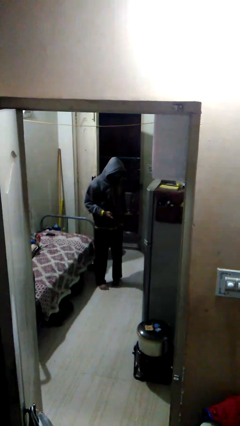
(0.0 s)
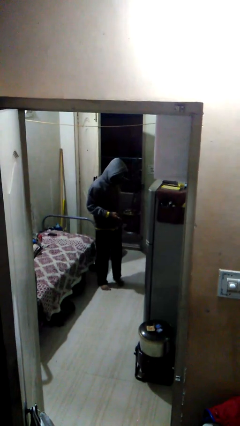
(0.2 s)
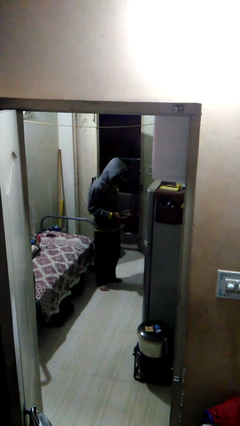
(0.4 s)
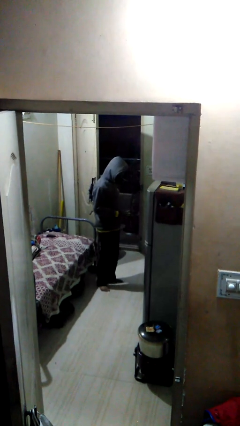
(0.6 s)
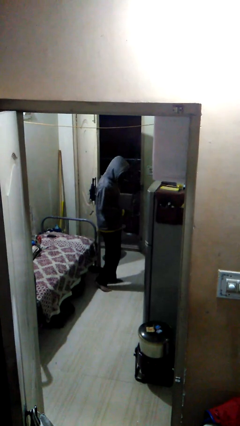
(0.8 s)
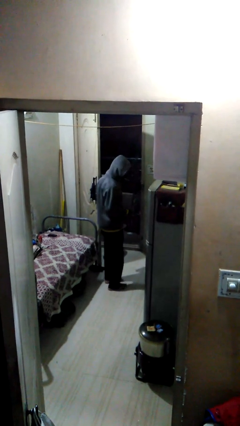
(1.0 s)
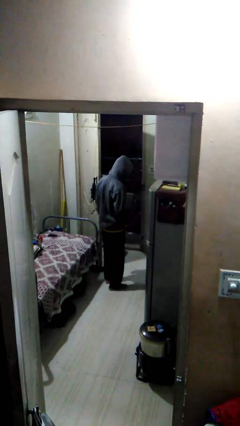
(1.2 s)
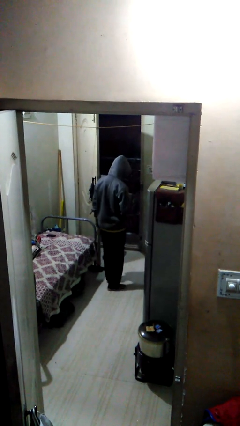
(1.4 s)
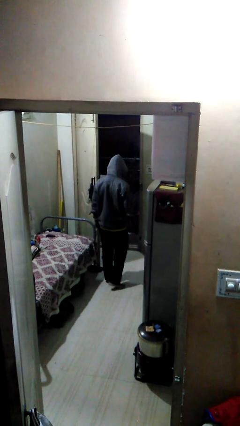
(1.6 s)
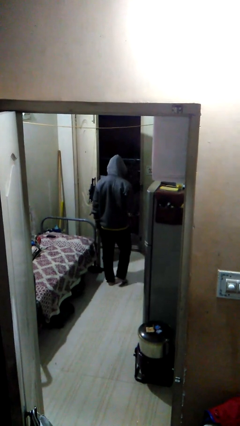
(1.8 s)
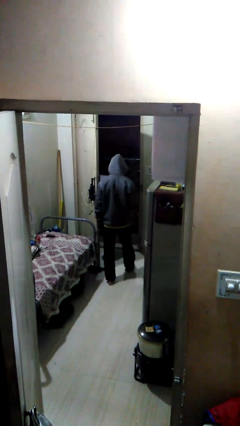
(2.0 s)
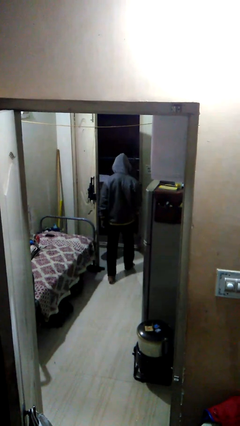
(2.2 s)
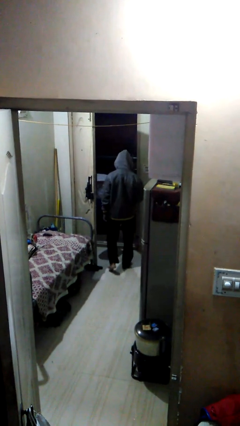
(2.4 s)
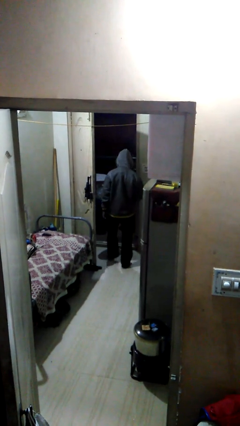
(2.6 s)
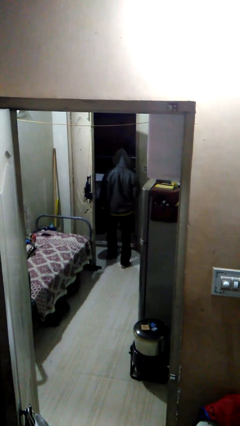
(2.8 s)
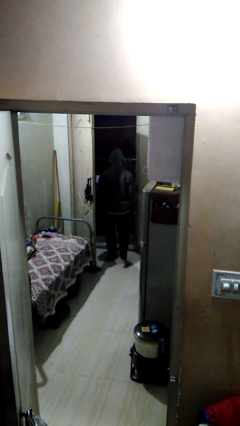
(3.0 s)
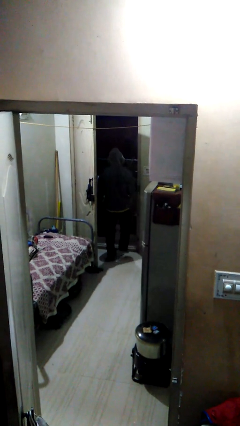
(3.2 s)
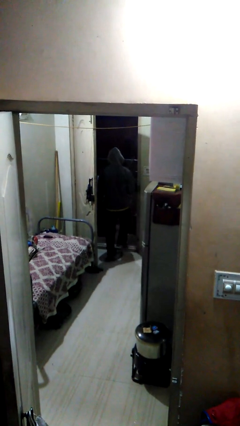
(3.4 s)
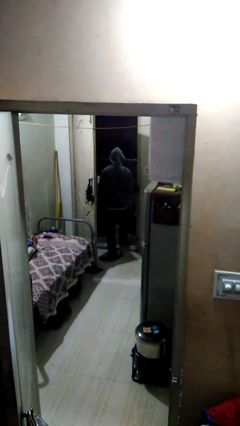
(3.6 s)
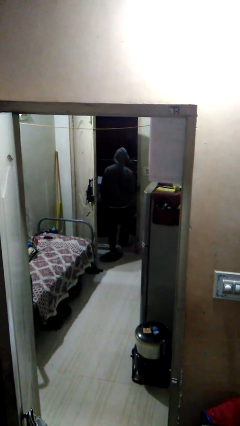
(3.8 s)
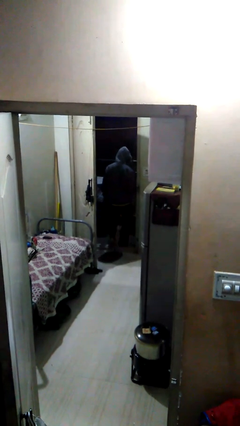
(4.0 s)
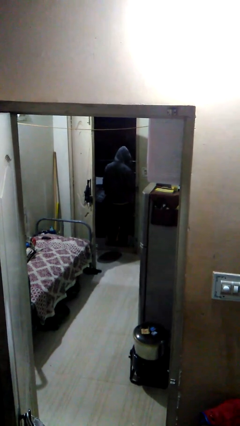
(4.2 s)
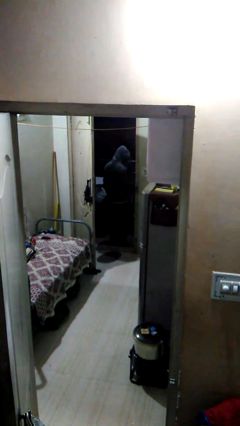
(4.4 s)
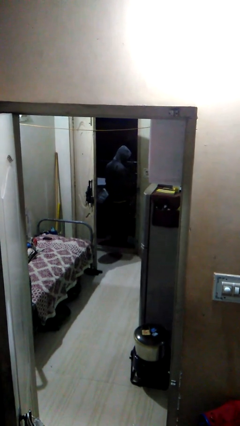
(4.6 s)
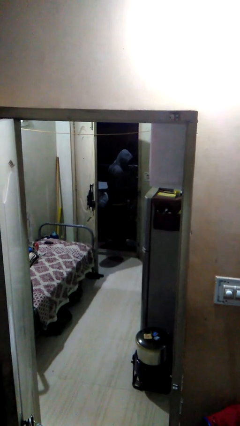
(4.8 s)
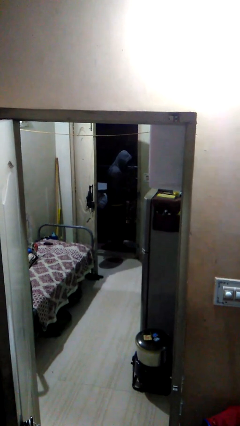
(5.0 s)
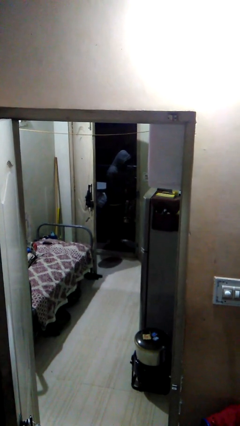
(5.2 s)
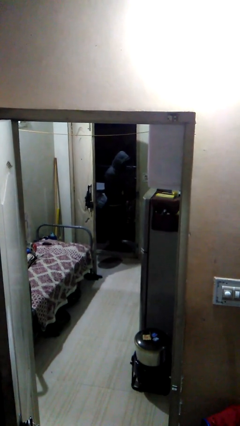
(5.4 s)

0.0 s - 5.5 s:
person exits scene through structure

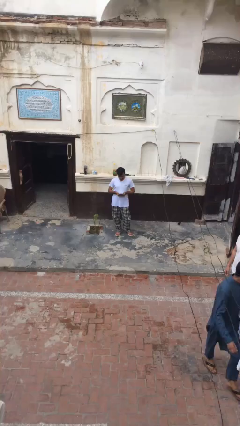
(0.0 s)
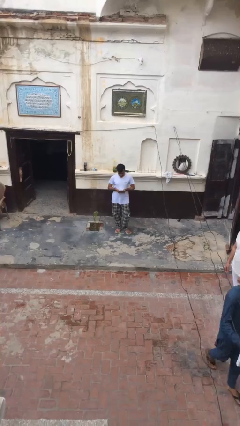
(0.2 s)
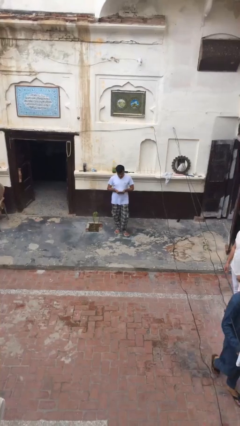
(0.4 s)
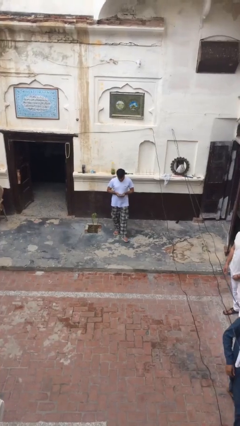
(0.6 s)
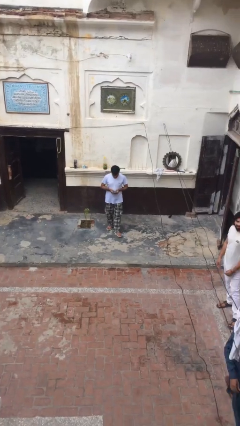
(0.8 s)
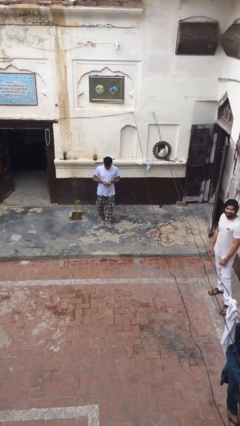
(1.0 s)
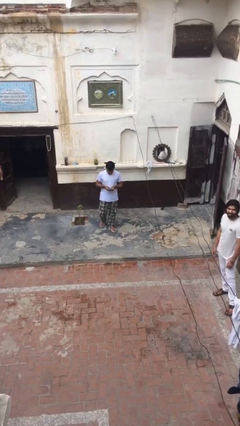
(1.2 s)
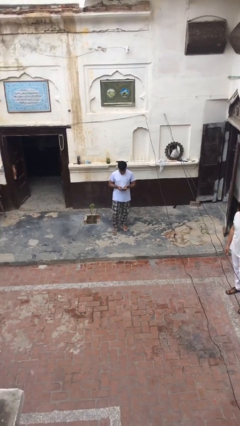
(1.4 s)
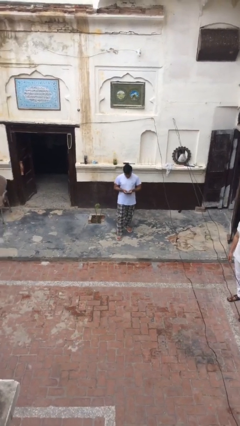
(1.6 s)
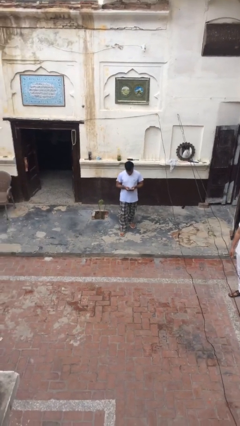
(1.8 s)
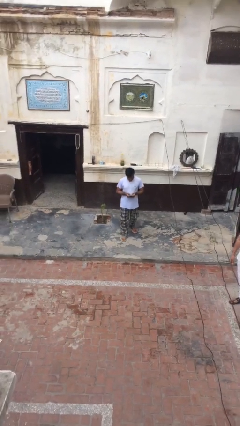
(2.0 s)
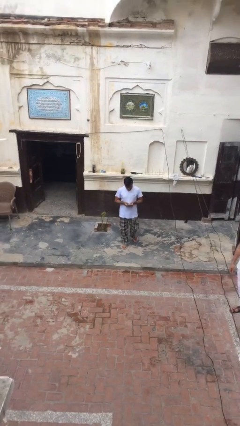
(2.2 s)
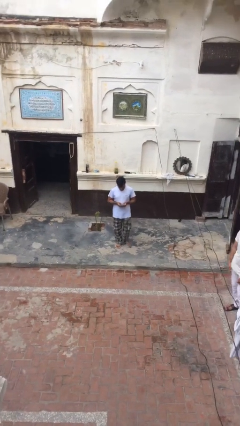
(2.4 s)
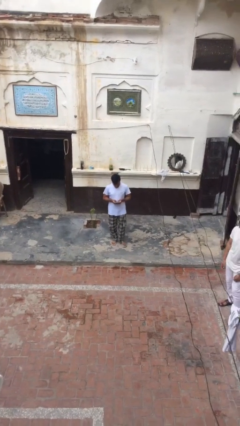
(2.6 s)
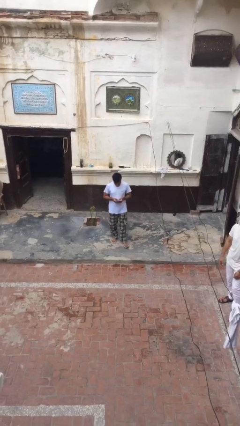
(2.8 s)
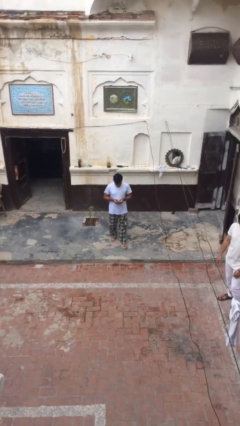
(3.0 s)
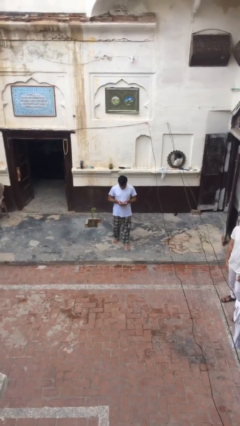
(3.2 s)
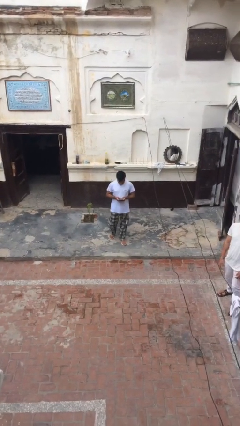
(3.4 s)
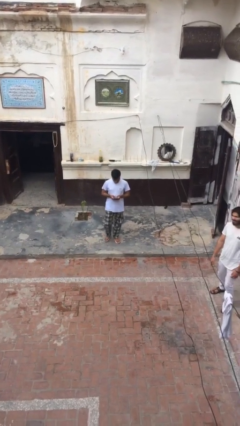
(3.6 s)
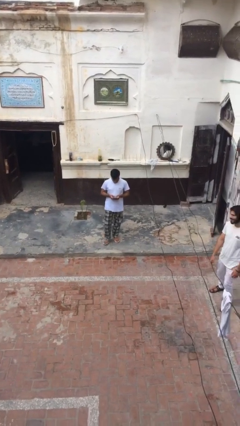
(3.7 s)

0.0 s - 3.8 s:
person texts on phone

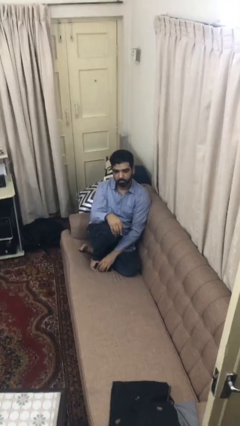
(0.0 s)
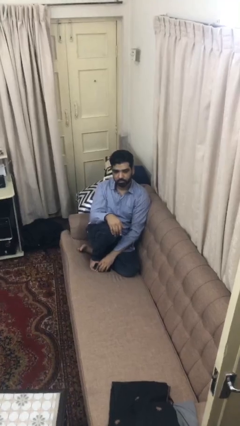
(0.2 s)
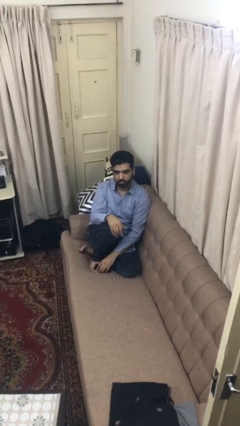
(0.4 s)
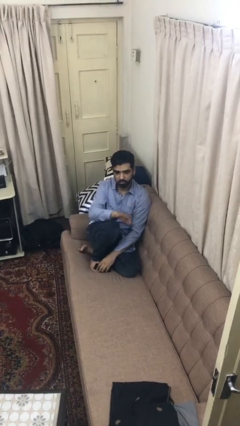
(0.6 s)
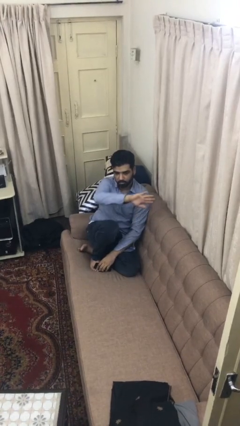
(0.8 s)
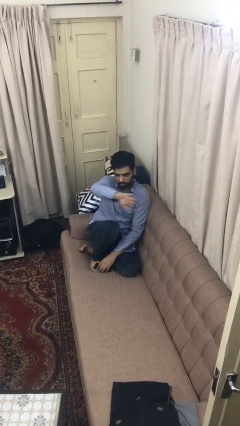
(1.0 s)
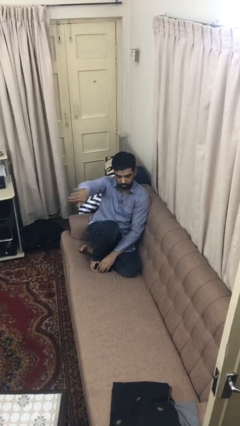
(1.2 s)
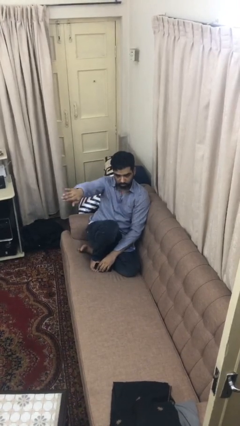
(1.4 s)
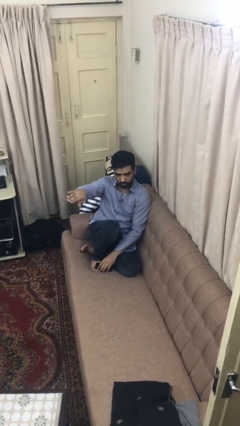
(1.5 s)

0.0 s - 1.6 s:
person gestures swipe right

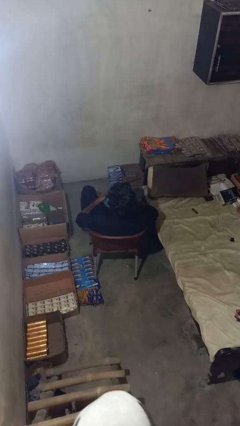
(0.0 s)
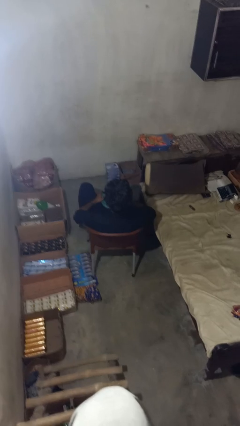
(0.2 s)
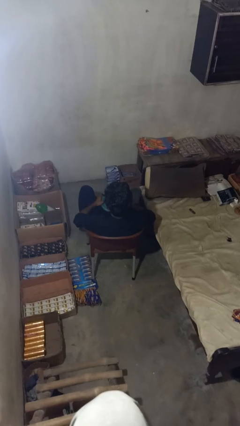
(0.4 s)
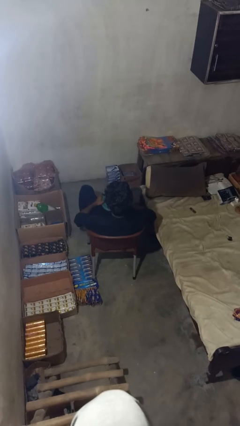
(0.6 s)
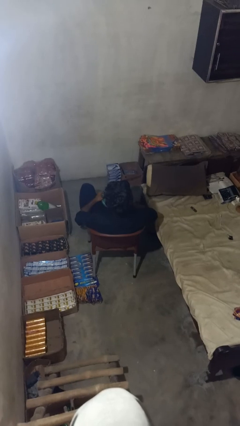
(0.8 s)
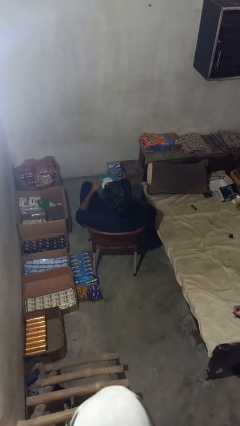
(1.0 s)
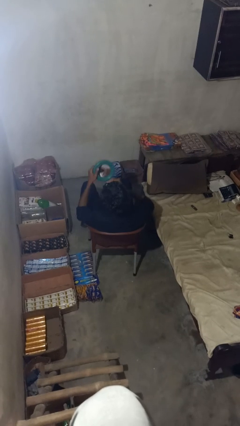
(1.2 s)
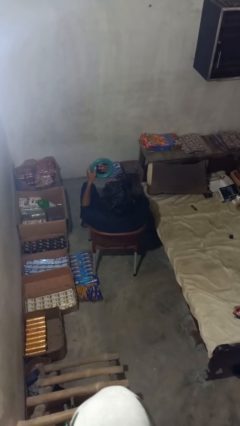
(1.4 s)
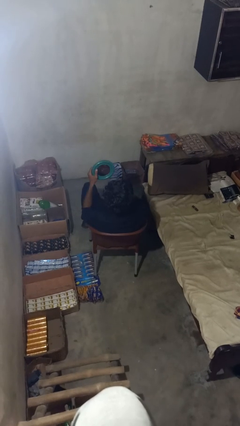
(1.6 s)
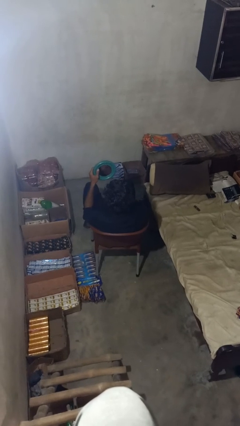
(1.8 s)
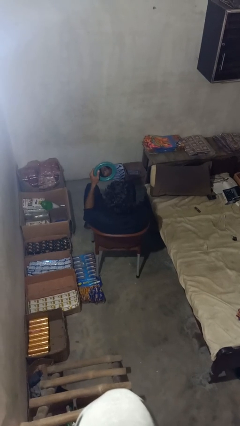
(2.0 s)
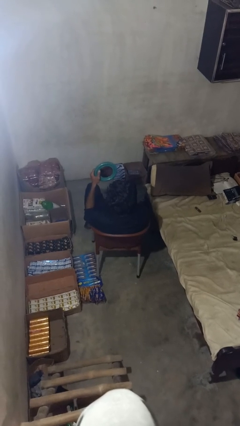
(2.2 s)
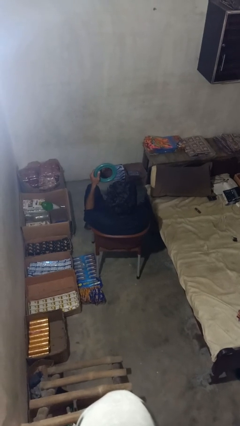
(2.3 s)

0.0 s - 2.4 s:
person applies foundation makeup

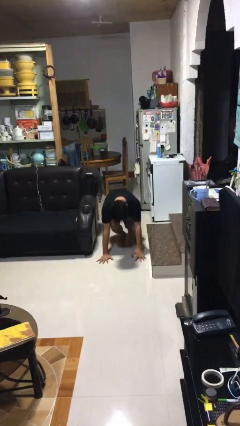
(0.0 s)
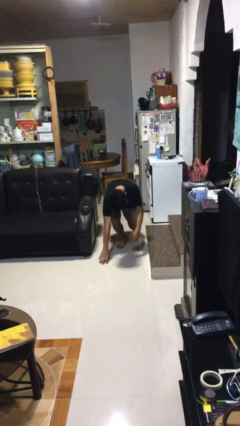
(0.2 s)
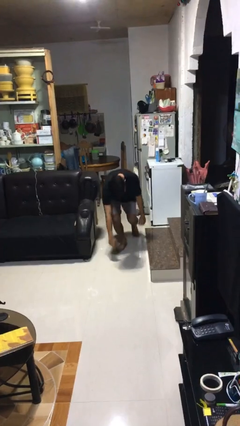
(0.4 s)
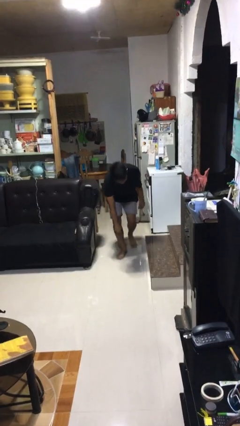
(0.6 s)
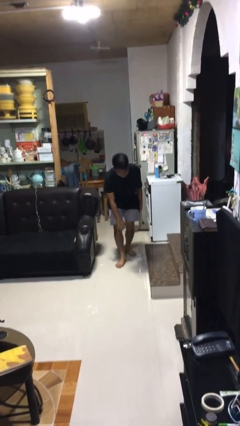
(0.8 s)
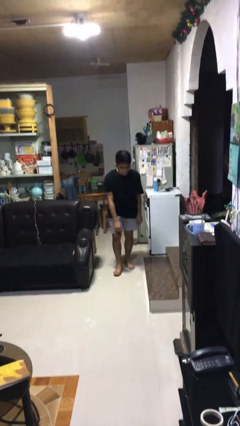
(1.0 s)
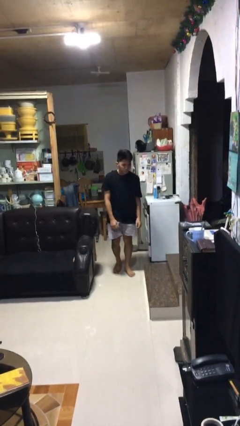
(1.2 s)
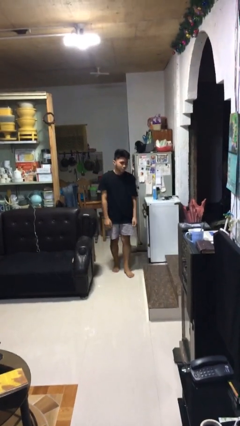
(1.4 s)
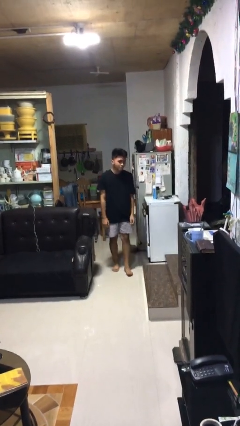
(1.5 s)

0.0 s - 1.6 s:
person stands up from floor

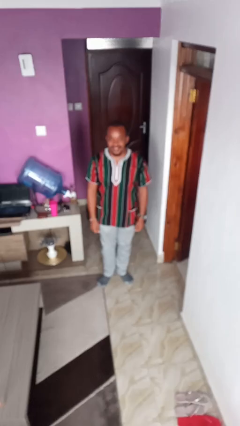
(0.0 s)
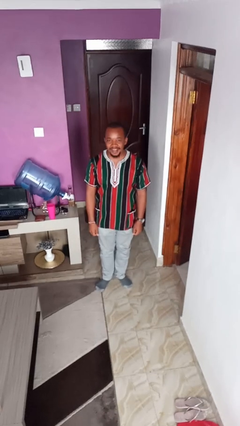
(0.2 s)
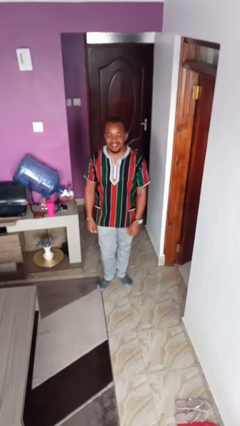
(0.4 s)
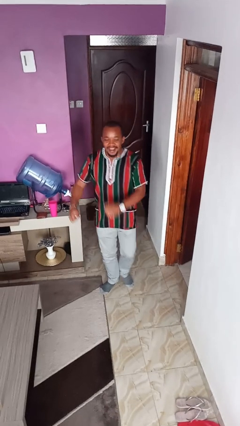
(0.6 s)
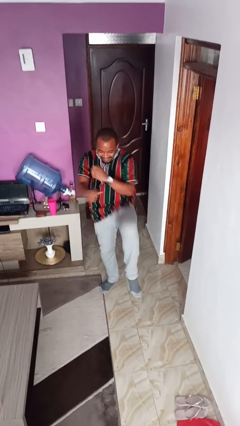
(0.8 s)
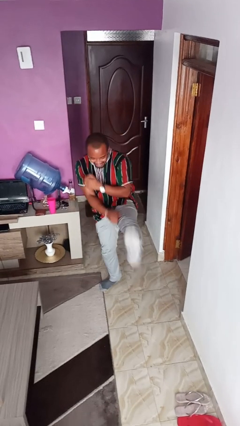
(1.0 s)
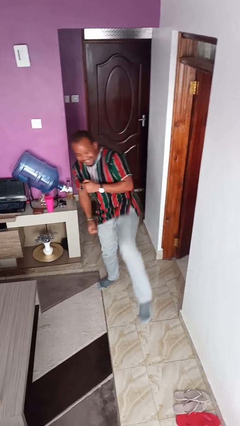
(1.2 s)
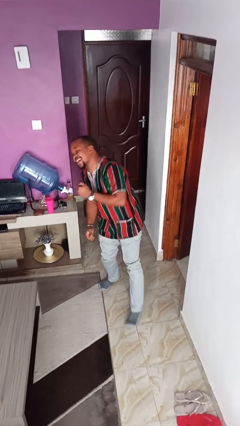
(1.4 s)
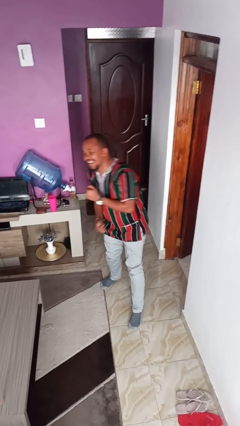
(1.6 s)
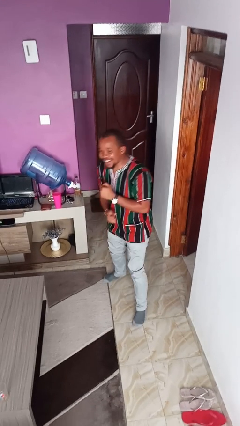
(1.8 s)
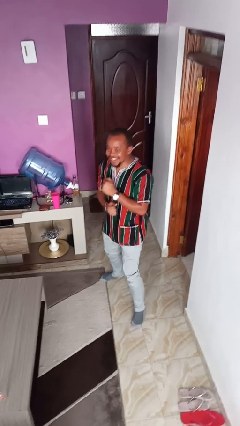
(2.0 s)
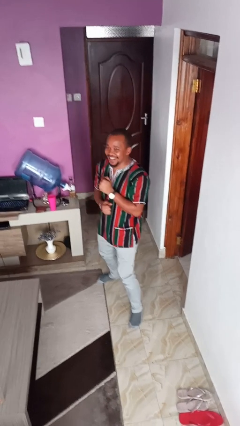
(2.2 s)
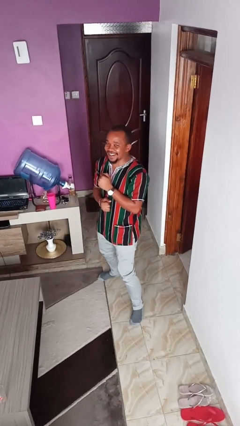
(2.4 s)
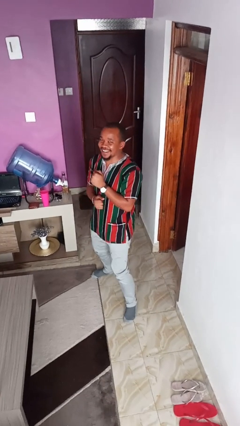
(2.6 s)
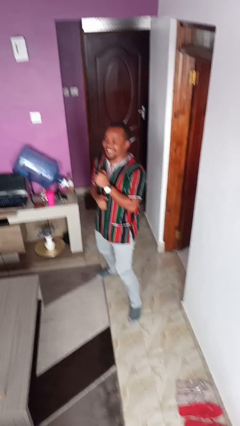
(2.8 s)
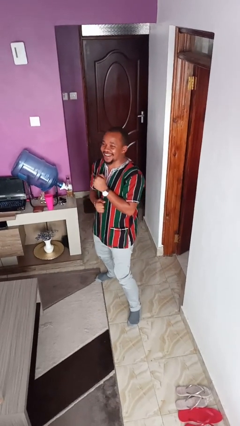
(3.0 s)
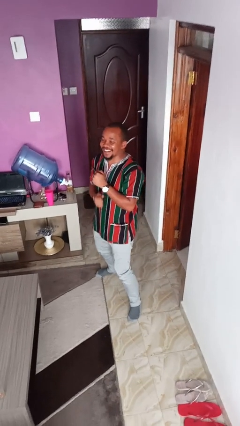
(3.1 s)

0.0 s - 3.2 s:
person karate kicks
